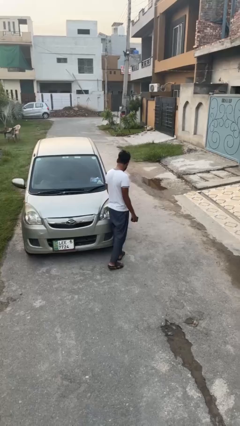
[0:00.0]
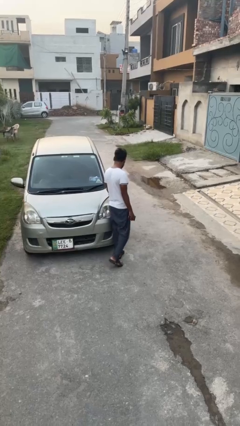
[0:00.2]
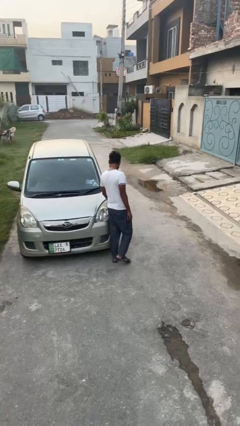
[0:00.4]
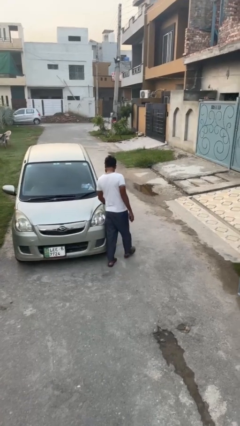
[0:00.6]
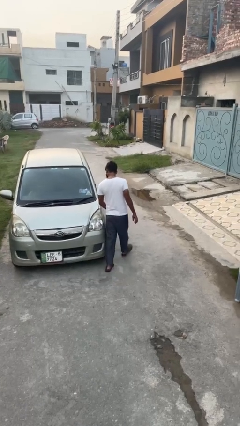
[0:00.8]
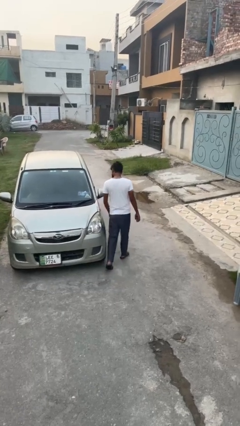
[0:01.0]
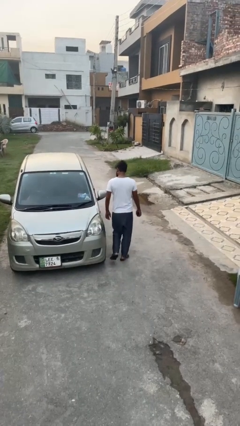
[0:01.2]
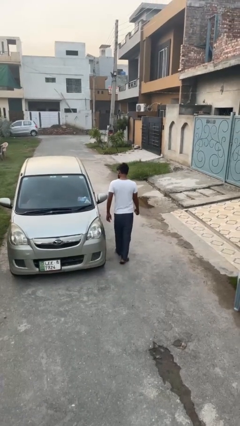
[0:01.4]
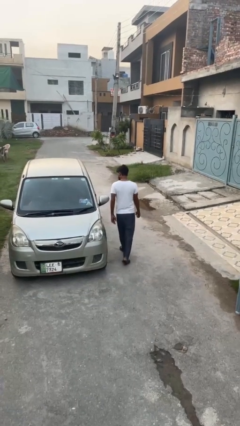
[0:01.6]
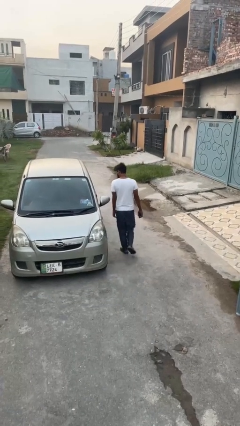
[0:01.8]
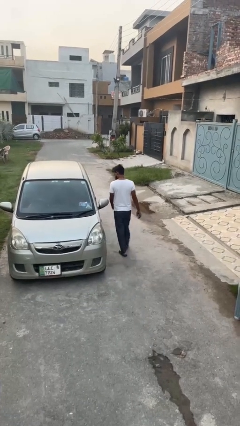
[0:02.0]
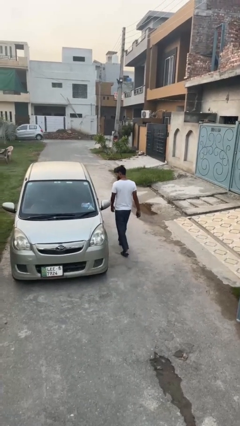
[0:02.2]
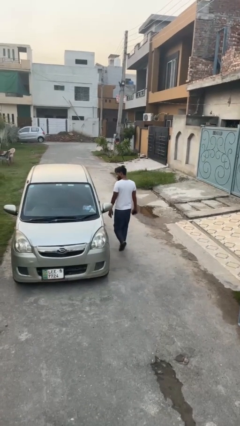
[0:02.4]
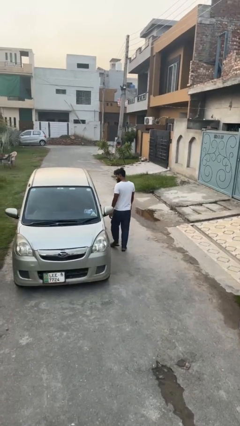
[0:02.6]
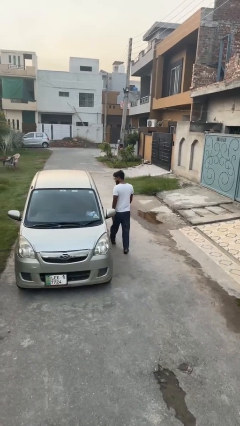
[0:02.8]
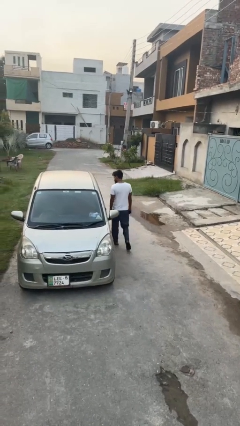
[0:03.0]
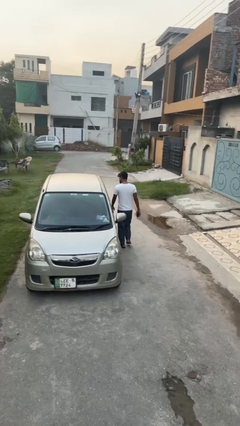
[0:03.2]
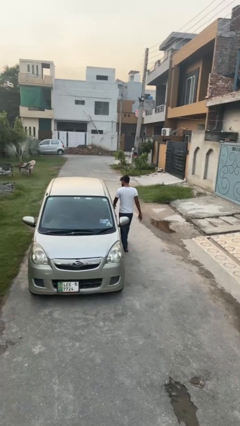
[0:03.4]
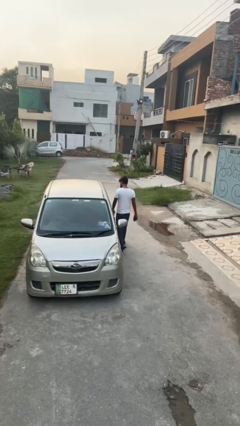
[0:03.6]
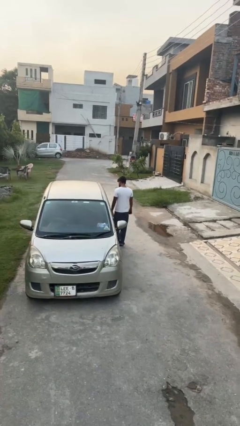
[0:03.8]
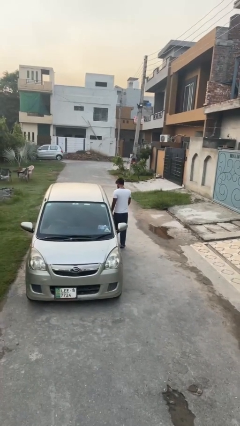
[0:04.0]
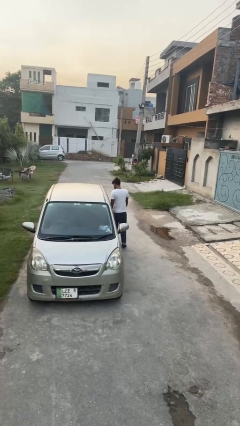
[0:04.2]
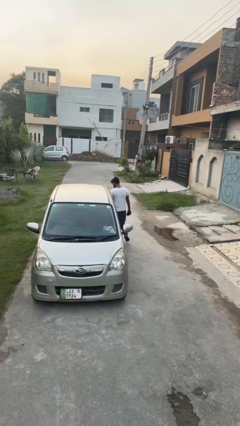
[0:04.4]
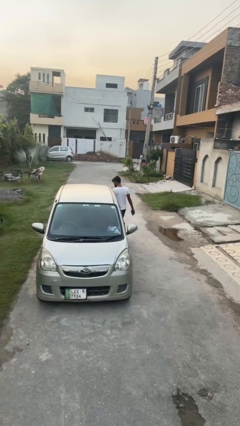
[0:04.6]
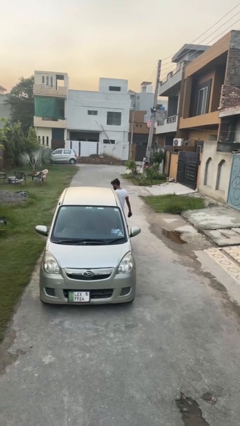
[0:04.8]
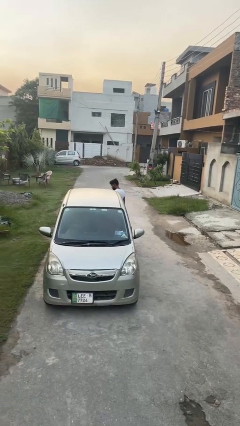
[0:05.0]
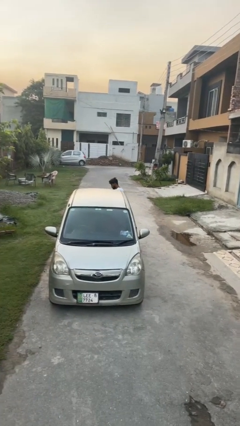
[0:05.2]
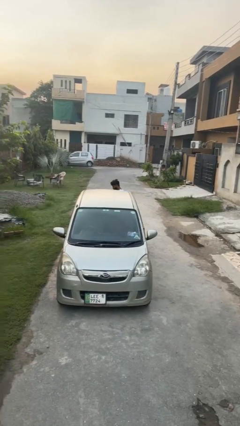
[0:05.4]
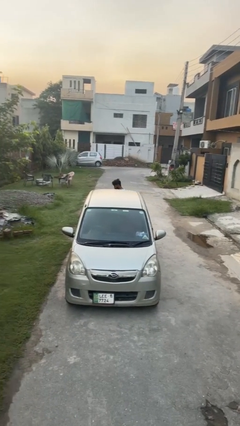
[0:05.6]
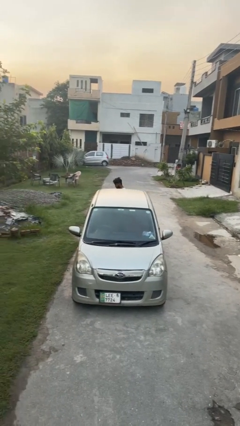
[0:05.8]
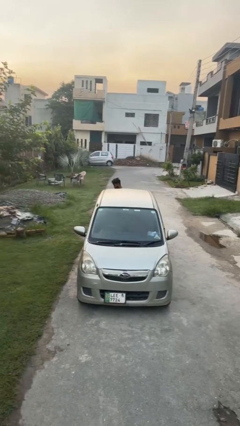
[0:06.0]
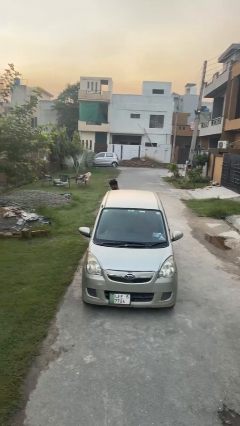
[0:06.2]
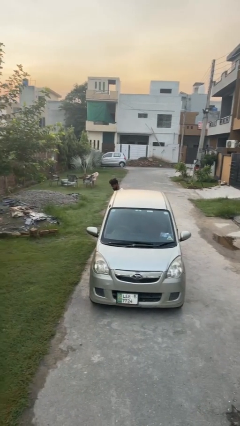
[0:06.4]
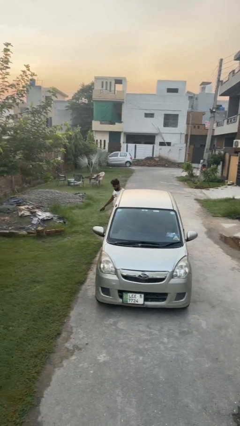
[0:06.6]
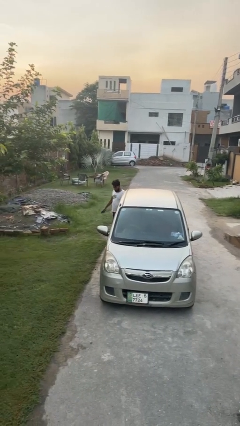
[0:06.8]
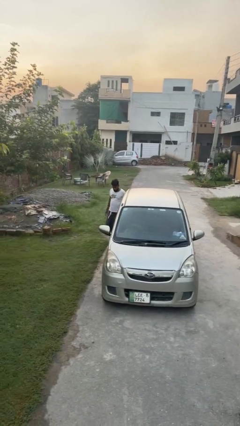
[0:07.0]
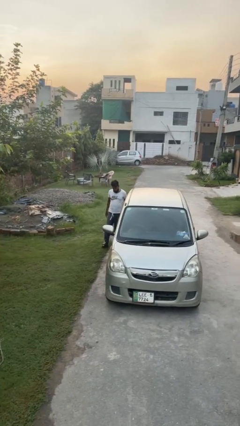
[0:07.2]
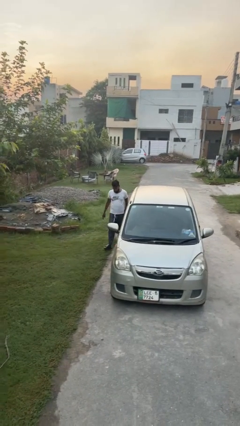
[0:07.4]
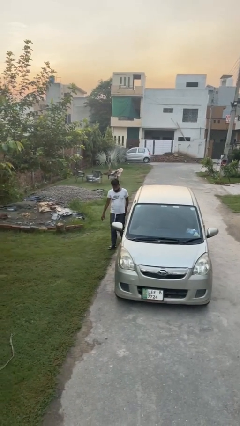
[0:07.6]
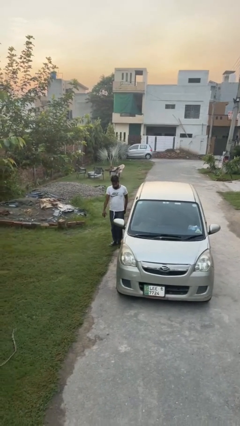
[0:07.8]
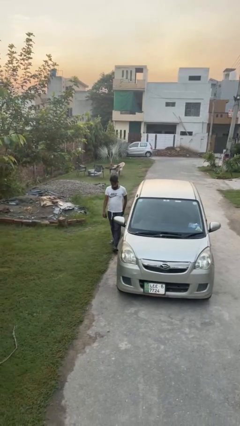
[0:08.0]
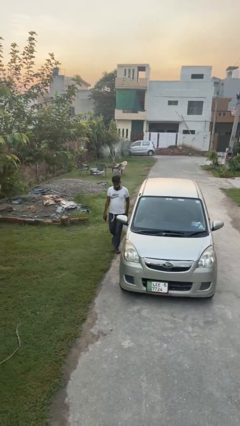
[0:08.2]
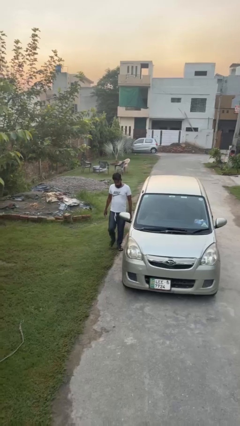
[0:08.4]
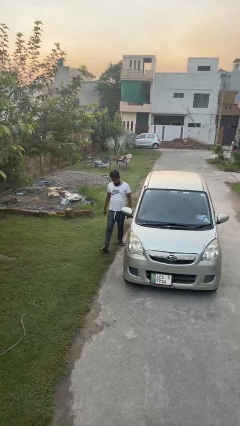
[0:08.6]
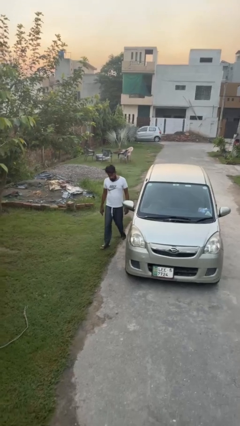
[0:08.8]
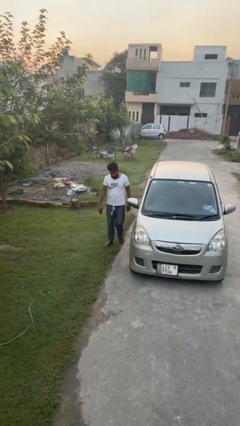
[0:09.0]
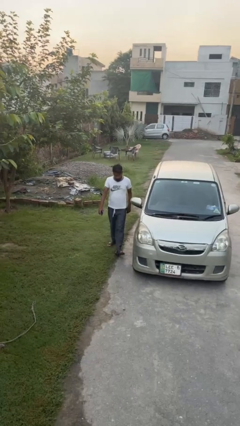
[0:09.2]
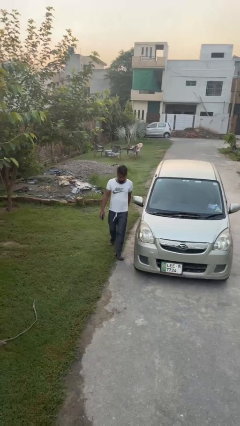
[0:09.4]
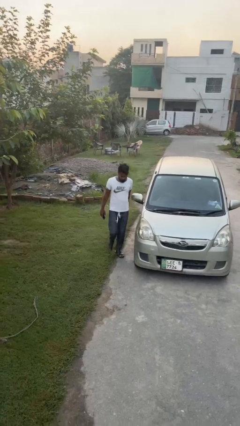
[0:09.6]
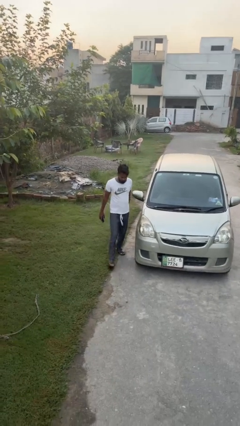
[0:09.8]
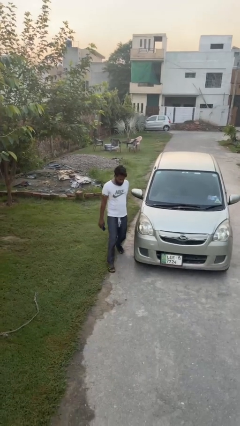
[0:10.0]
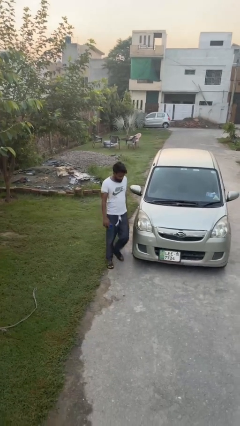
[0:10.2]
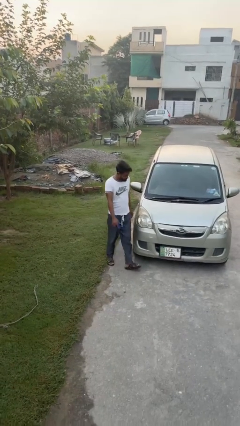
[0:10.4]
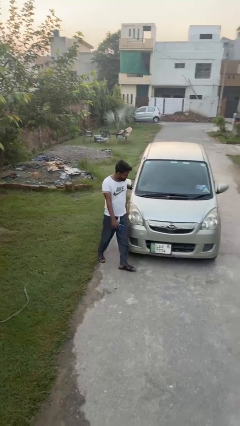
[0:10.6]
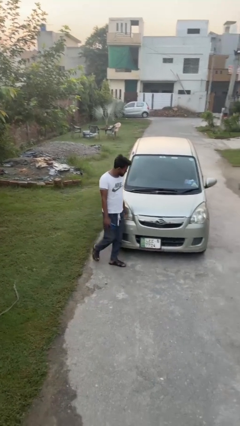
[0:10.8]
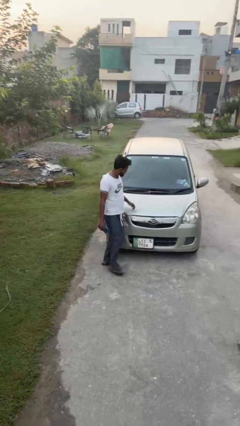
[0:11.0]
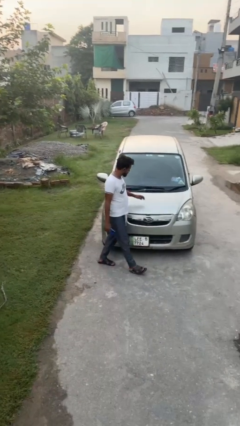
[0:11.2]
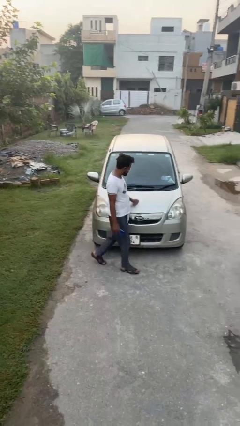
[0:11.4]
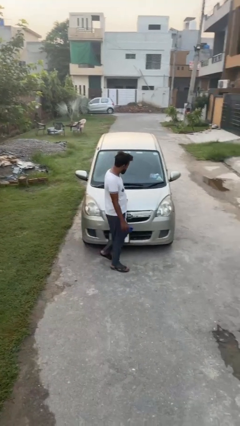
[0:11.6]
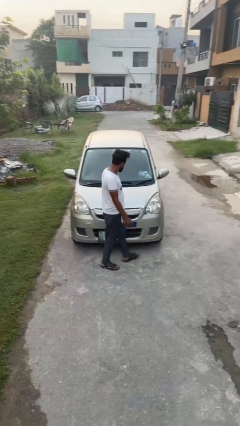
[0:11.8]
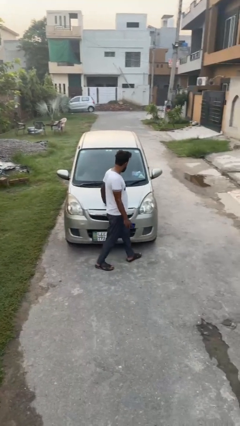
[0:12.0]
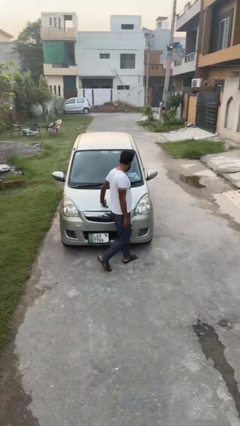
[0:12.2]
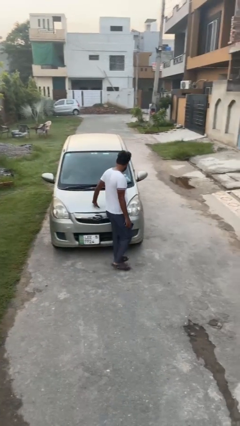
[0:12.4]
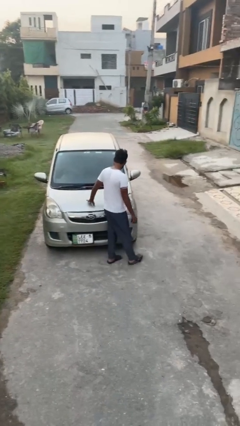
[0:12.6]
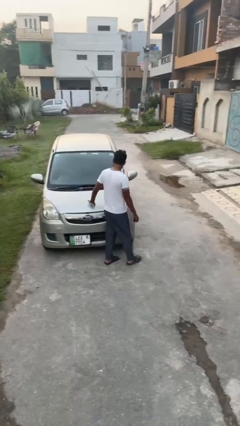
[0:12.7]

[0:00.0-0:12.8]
person walks around car

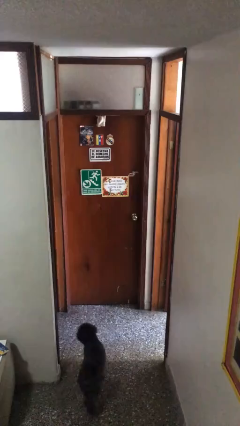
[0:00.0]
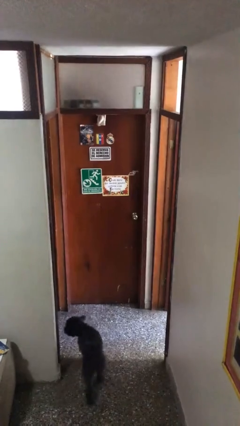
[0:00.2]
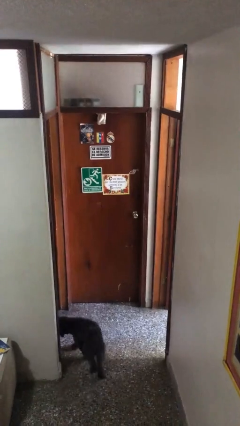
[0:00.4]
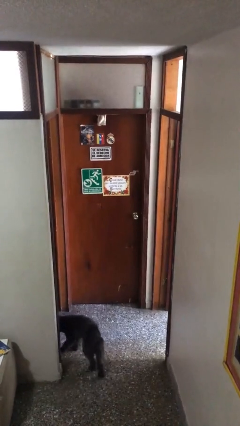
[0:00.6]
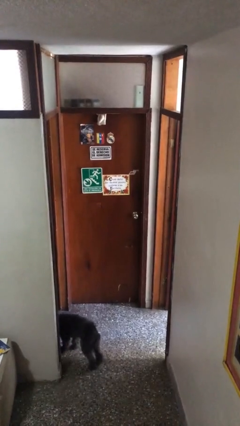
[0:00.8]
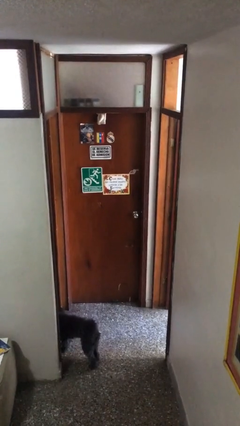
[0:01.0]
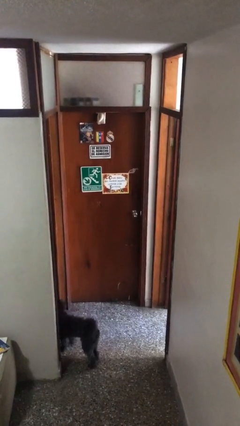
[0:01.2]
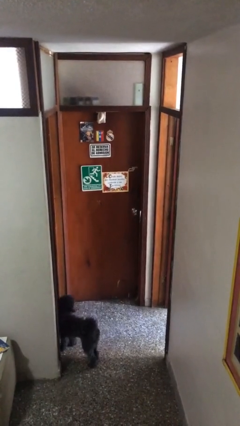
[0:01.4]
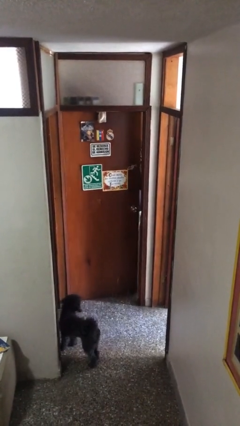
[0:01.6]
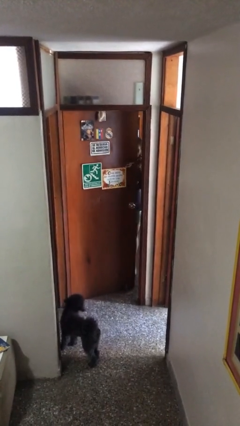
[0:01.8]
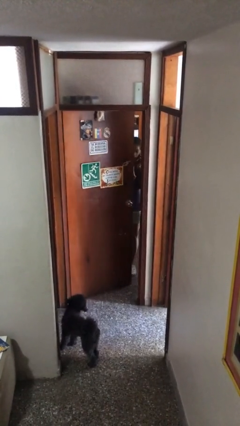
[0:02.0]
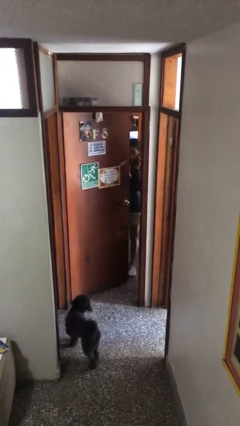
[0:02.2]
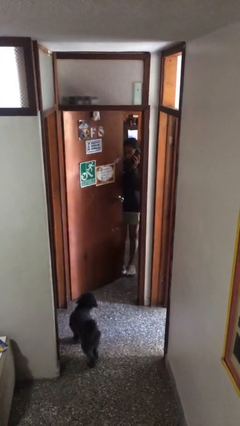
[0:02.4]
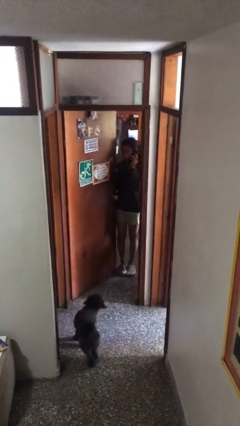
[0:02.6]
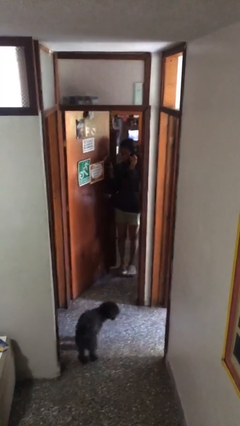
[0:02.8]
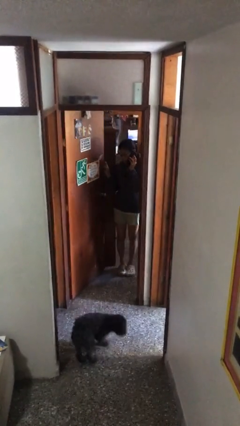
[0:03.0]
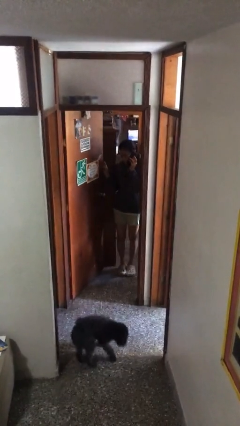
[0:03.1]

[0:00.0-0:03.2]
person opens facility door

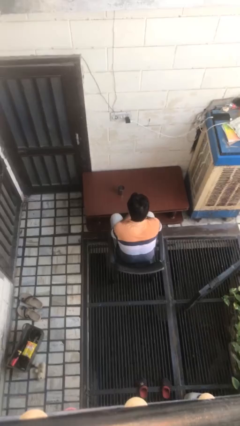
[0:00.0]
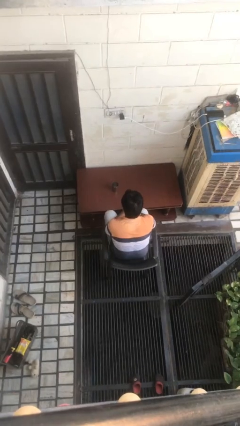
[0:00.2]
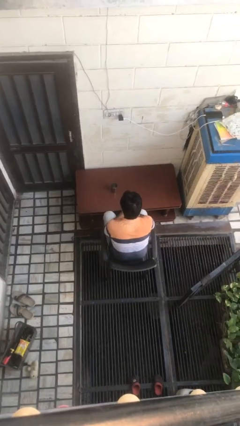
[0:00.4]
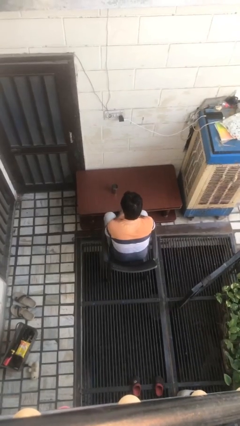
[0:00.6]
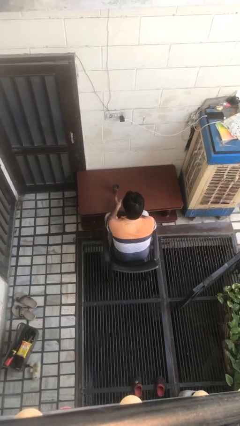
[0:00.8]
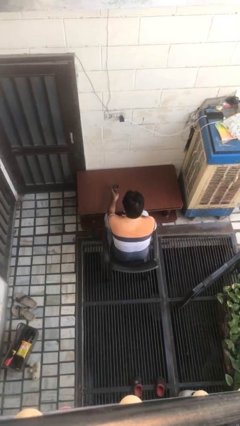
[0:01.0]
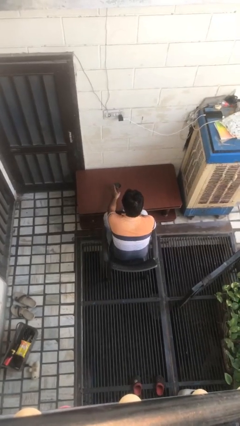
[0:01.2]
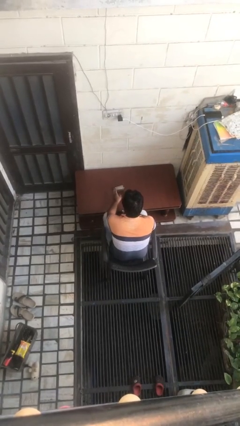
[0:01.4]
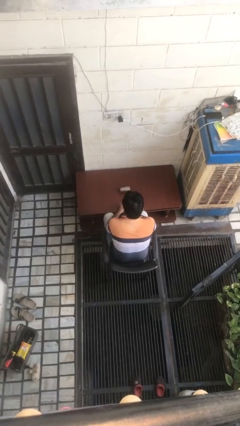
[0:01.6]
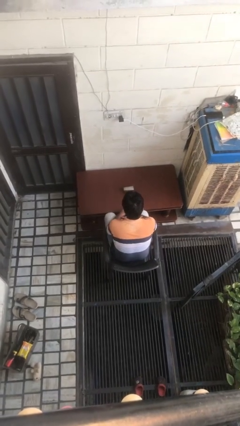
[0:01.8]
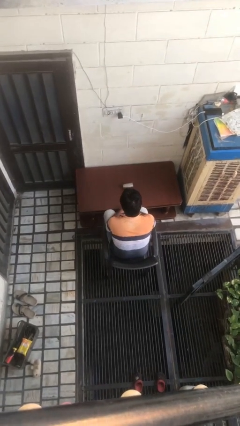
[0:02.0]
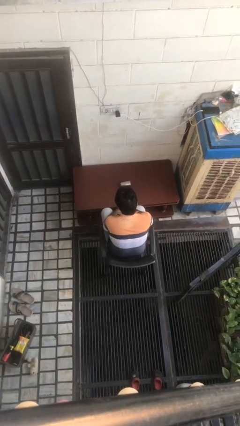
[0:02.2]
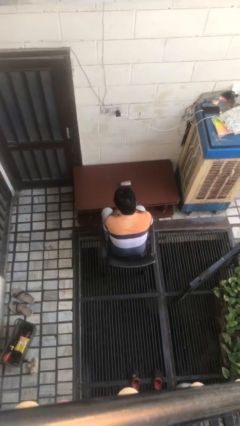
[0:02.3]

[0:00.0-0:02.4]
person knocks over glass
